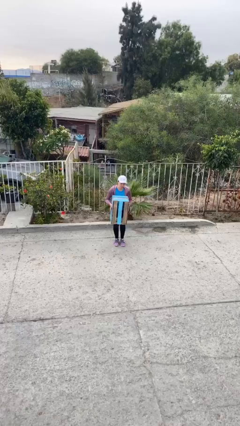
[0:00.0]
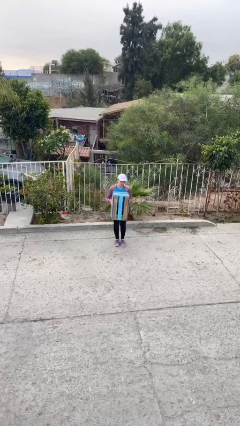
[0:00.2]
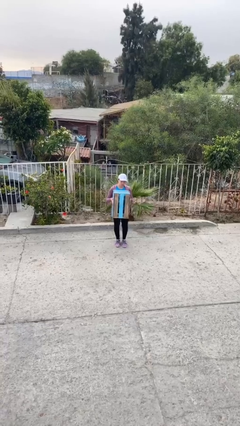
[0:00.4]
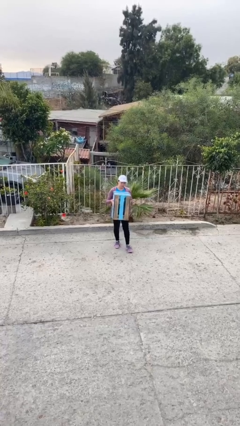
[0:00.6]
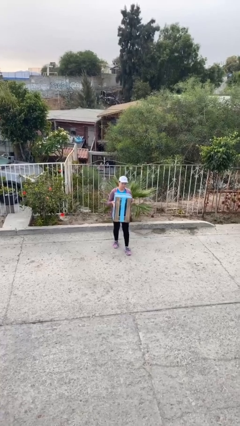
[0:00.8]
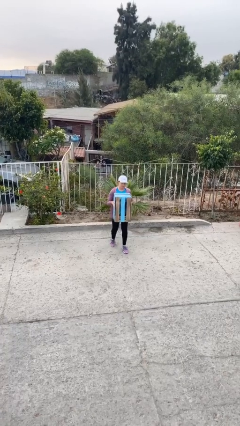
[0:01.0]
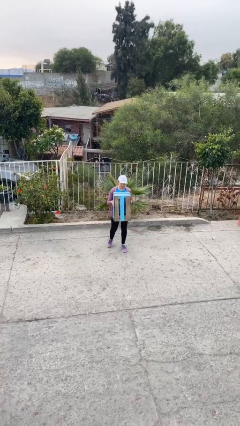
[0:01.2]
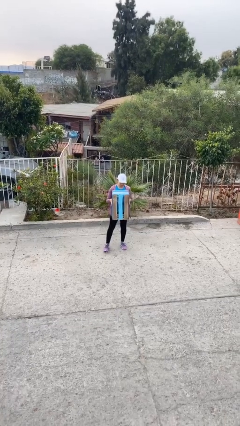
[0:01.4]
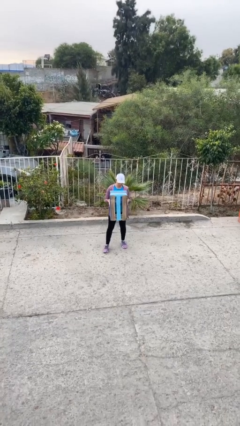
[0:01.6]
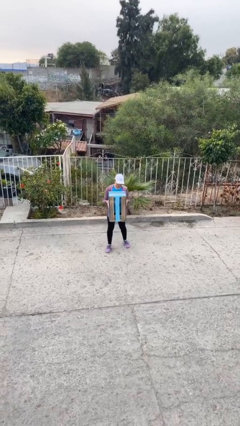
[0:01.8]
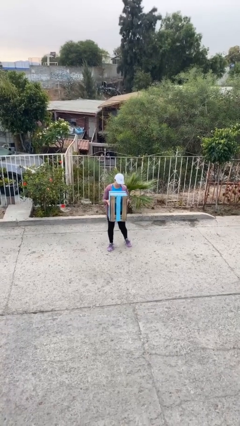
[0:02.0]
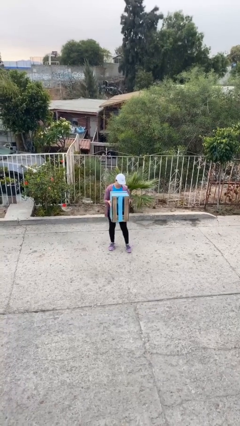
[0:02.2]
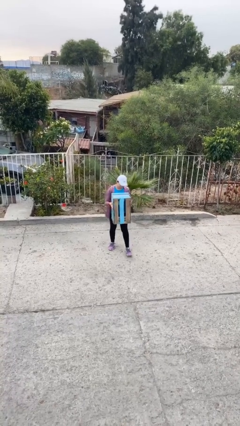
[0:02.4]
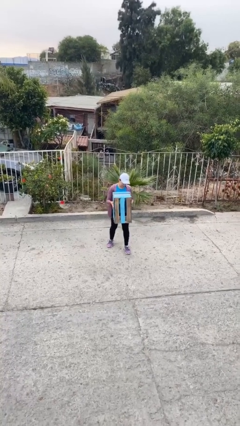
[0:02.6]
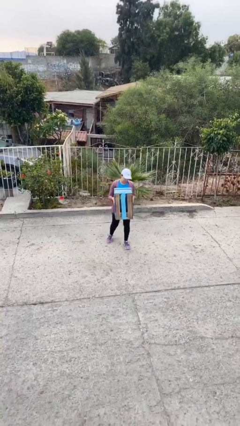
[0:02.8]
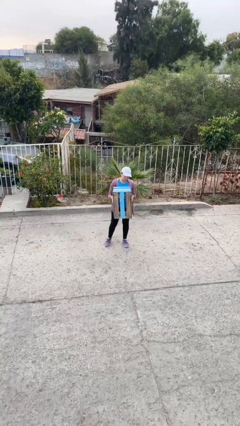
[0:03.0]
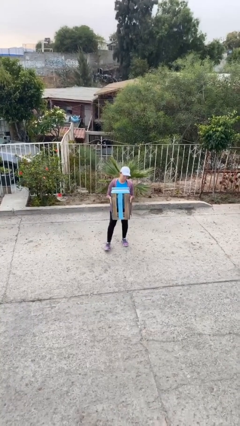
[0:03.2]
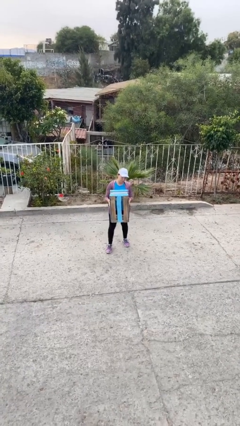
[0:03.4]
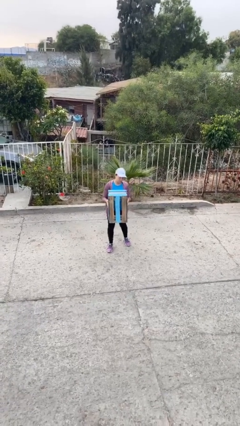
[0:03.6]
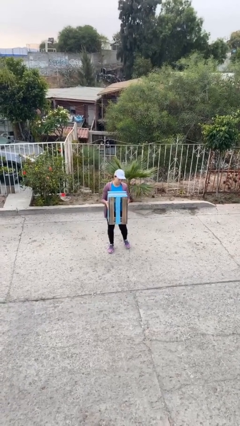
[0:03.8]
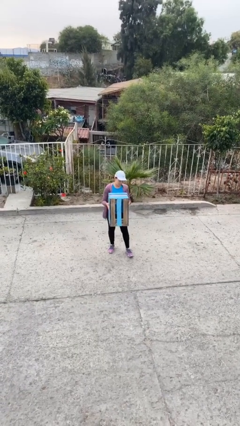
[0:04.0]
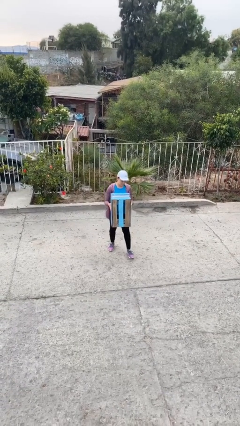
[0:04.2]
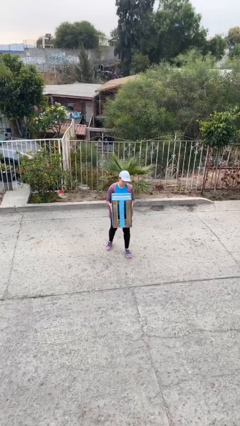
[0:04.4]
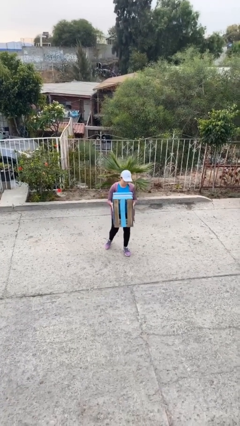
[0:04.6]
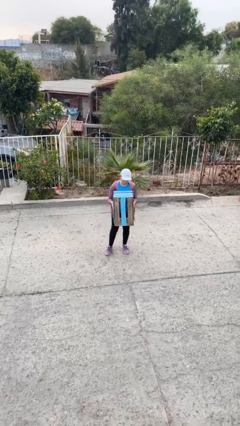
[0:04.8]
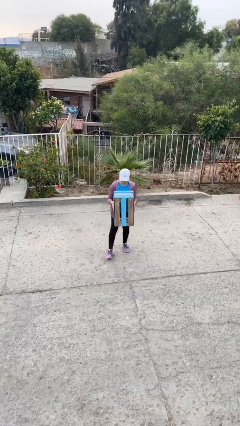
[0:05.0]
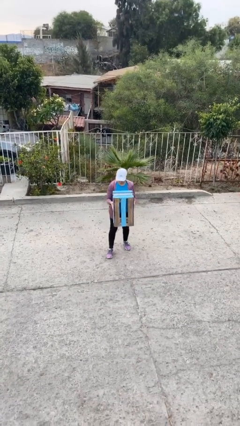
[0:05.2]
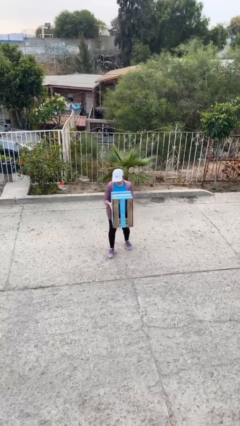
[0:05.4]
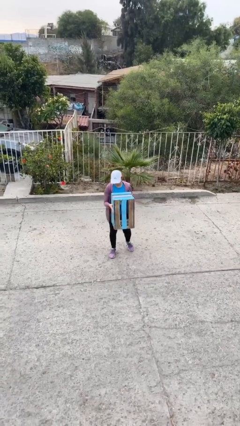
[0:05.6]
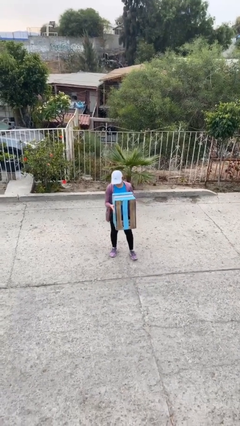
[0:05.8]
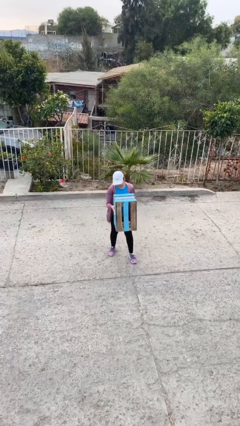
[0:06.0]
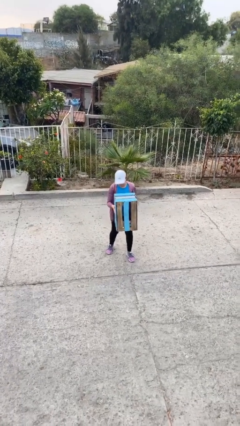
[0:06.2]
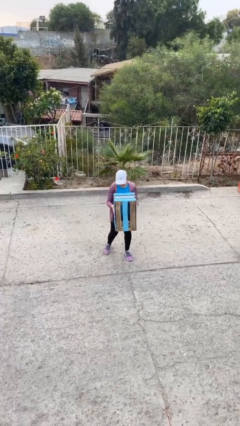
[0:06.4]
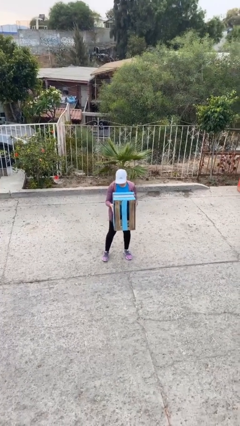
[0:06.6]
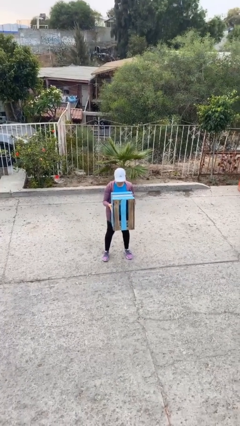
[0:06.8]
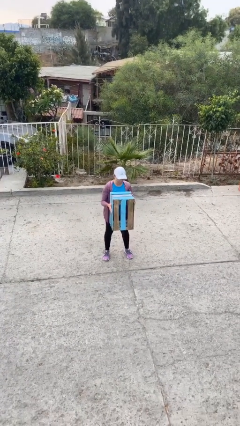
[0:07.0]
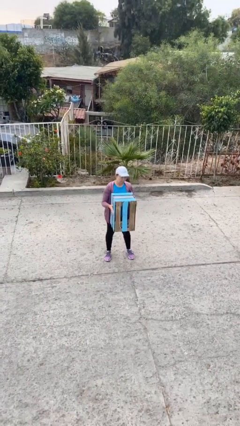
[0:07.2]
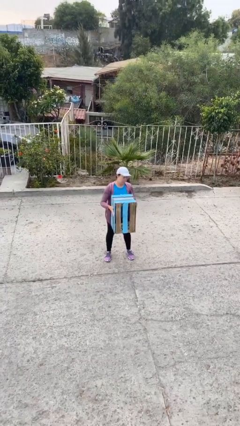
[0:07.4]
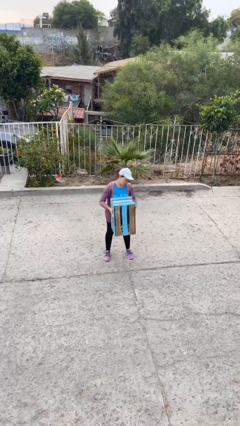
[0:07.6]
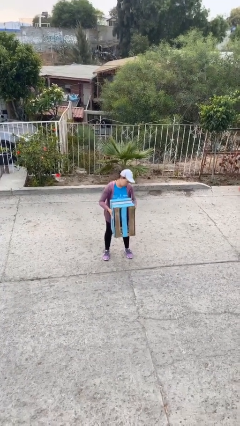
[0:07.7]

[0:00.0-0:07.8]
person carries heavy object

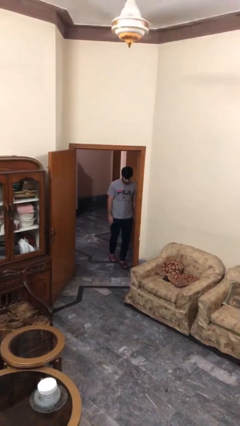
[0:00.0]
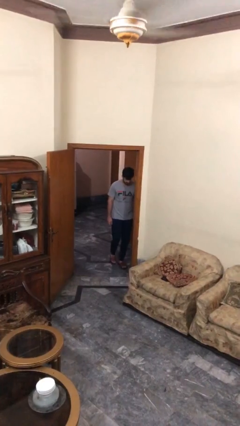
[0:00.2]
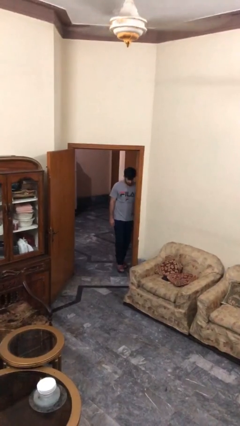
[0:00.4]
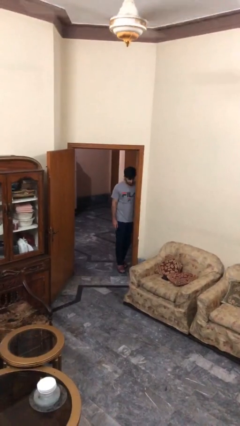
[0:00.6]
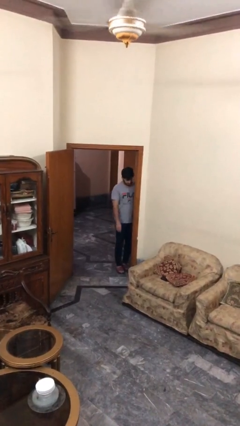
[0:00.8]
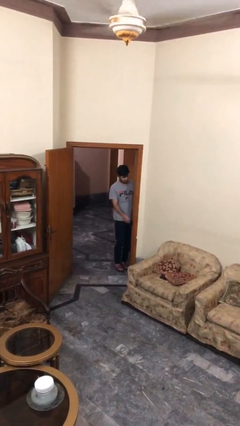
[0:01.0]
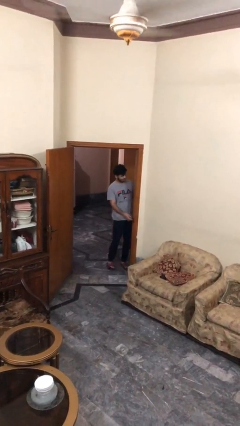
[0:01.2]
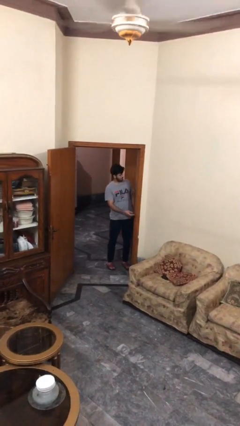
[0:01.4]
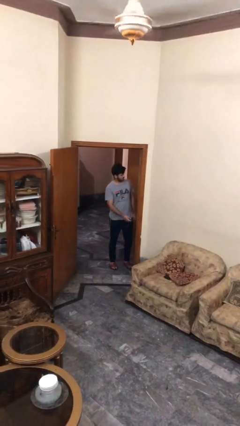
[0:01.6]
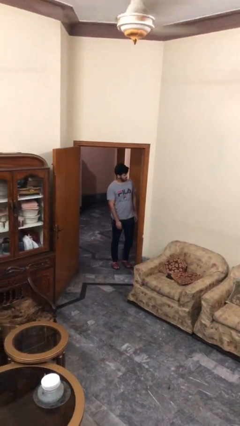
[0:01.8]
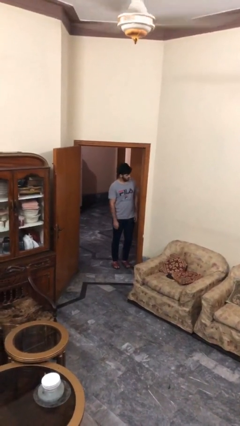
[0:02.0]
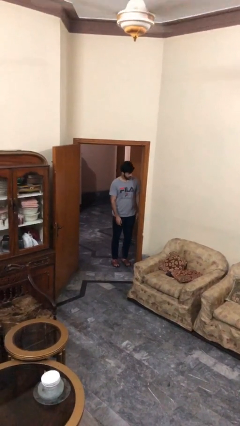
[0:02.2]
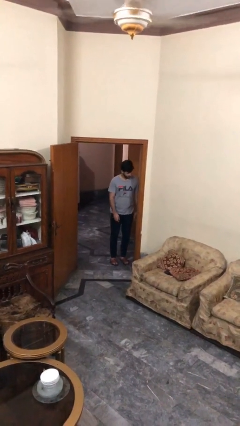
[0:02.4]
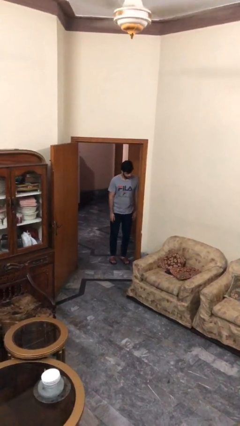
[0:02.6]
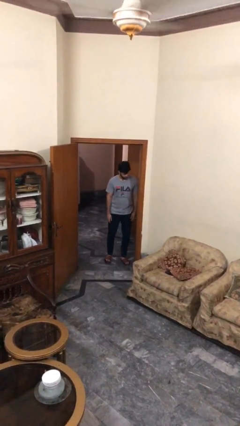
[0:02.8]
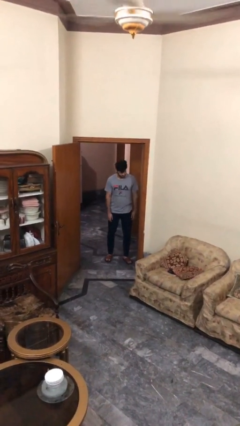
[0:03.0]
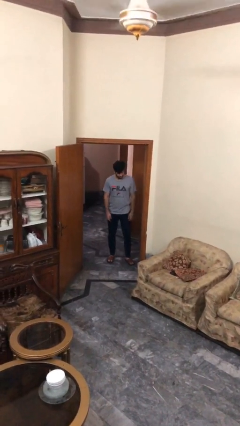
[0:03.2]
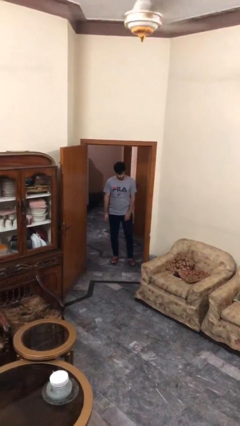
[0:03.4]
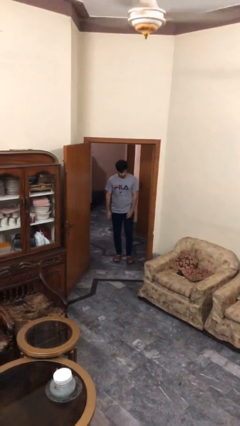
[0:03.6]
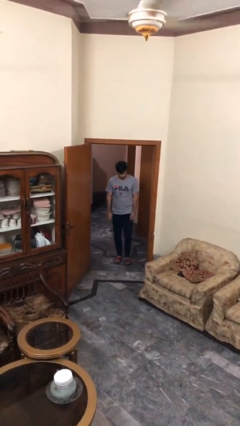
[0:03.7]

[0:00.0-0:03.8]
person bumps into wall

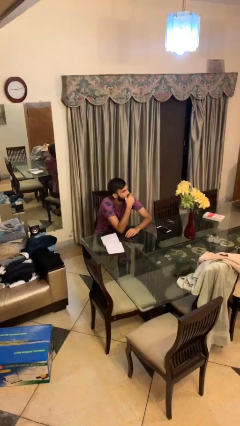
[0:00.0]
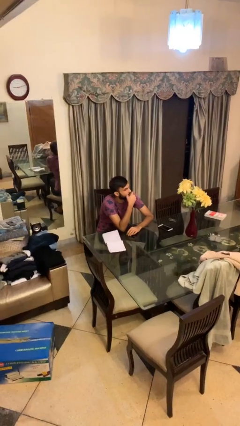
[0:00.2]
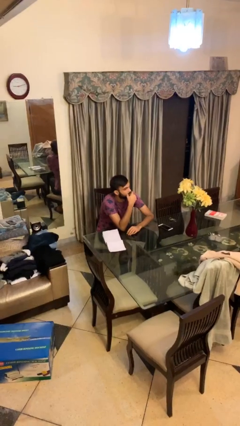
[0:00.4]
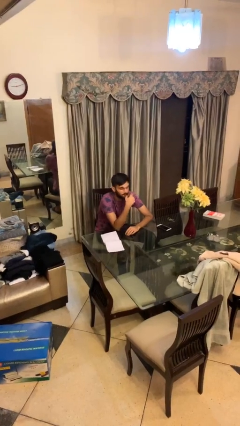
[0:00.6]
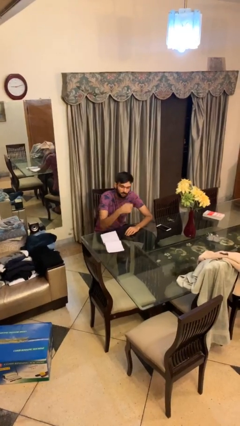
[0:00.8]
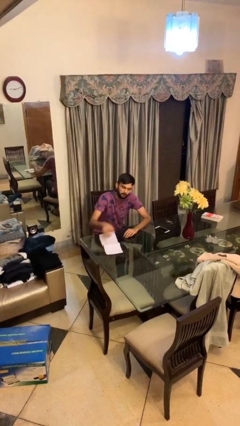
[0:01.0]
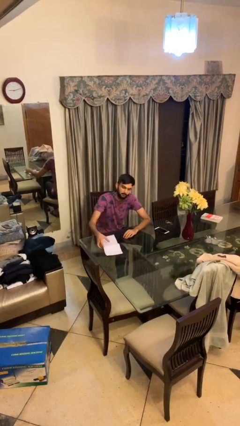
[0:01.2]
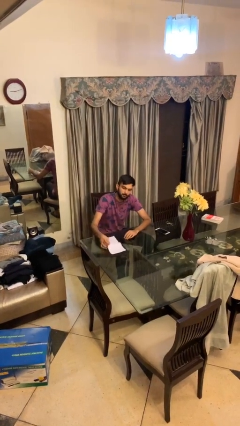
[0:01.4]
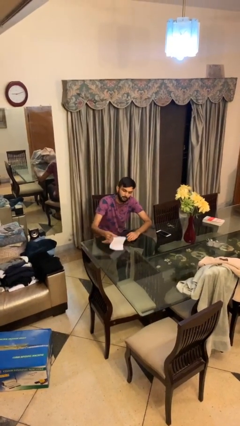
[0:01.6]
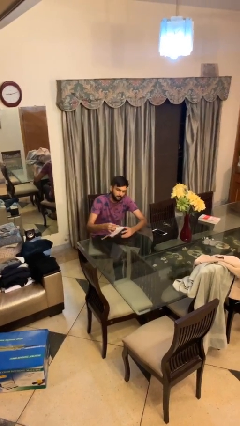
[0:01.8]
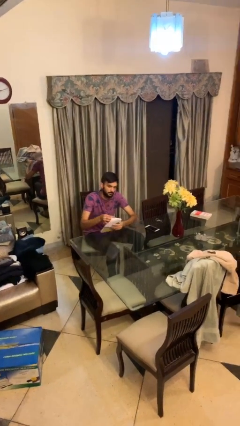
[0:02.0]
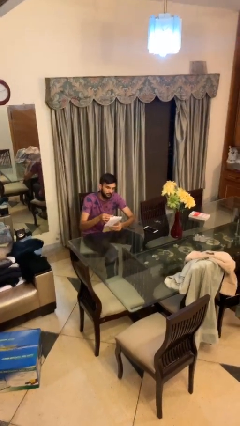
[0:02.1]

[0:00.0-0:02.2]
person picks up object from table

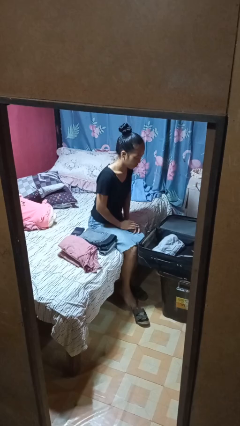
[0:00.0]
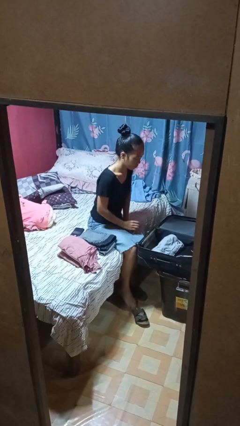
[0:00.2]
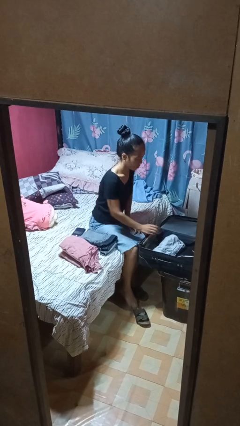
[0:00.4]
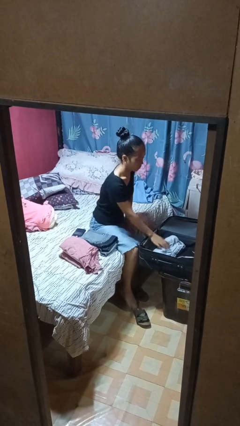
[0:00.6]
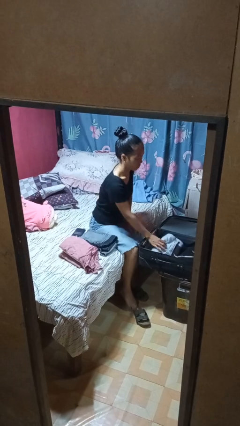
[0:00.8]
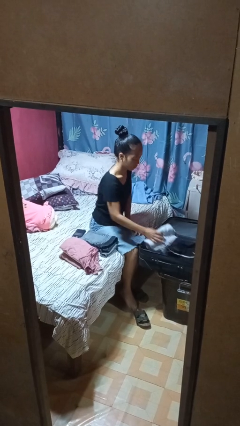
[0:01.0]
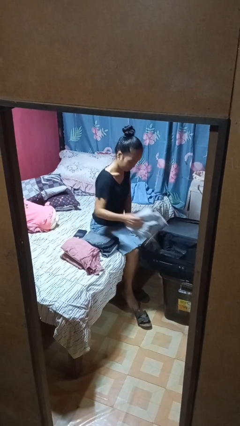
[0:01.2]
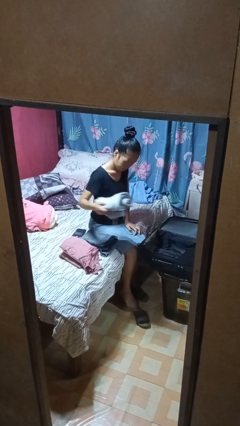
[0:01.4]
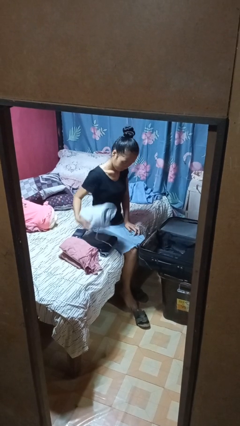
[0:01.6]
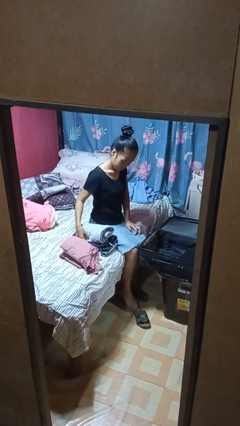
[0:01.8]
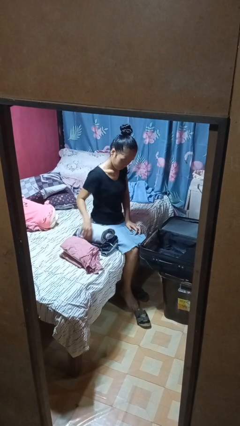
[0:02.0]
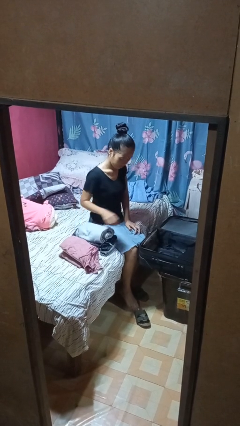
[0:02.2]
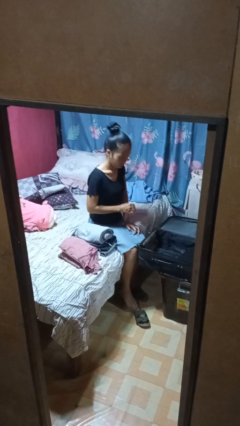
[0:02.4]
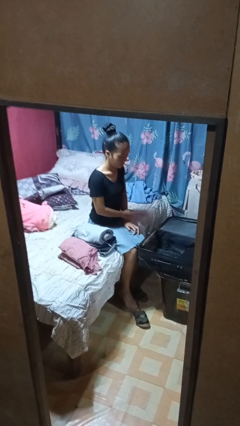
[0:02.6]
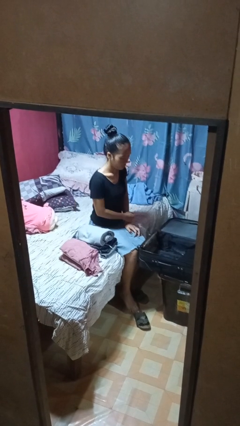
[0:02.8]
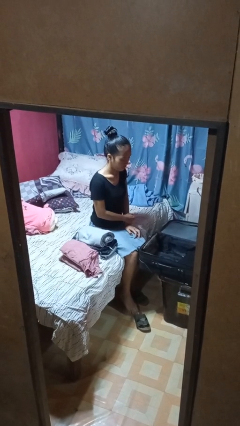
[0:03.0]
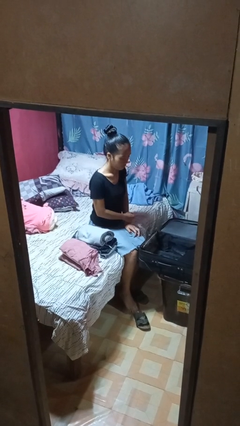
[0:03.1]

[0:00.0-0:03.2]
person unloads clothes from suitcase

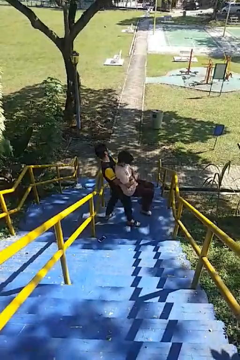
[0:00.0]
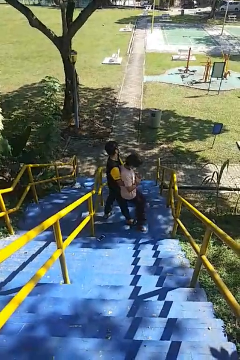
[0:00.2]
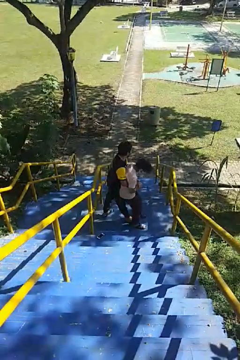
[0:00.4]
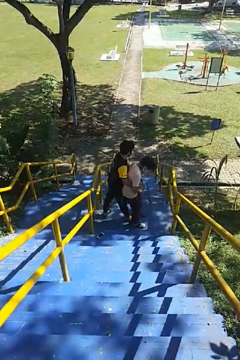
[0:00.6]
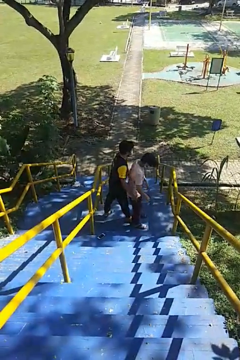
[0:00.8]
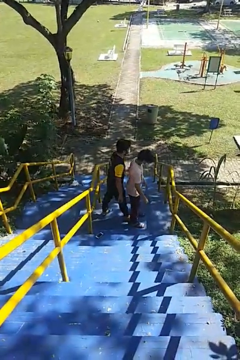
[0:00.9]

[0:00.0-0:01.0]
person puts down person
